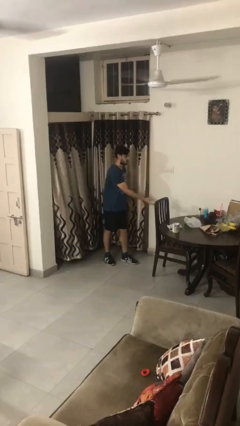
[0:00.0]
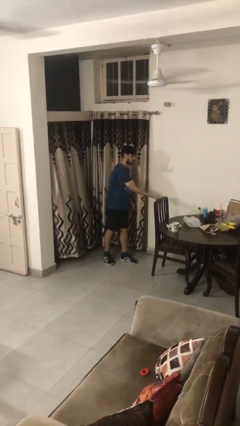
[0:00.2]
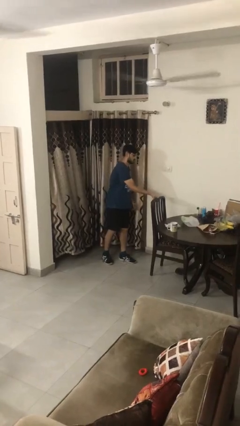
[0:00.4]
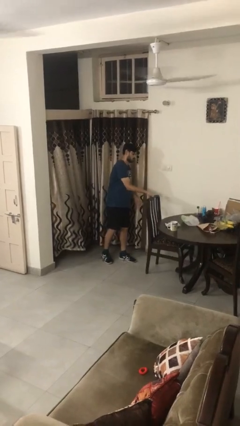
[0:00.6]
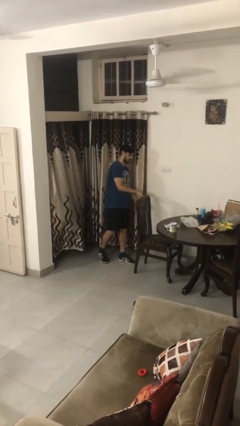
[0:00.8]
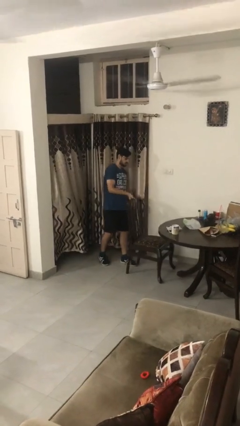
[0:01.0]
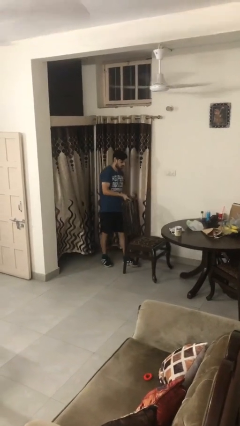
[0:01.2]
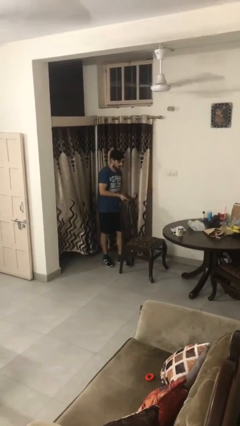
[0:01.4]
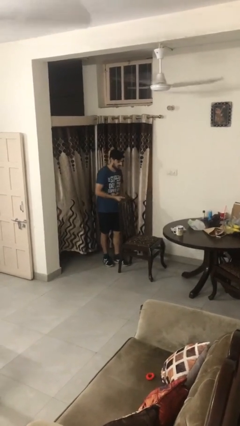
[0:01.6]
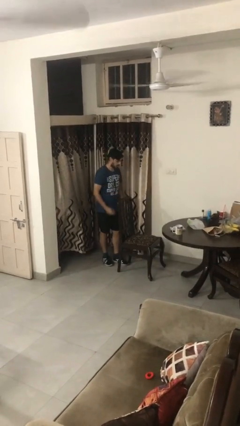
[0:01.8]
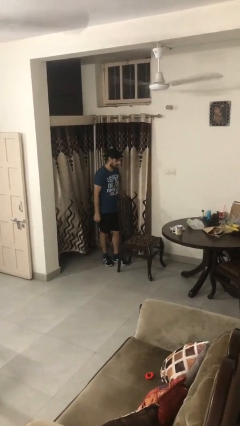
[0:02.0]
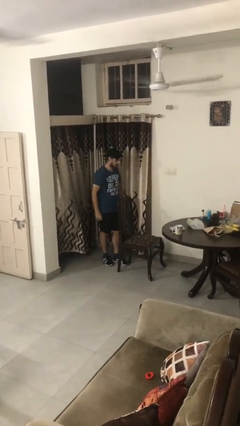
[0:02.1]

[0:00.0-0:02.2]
person pulls out chair

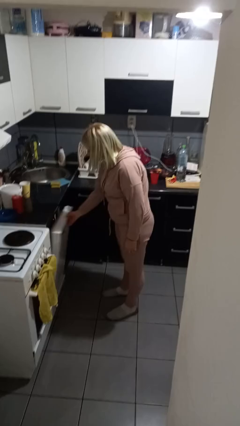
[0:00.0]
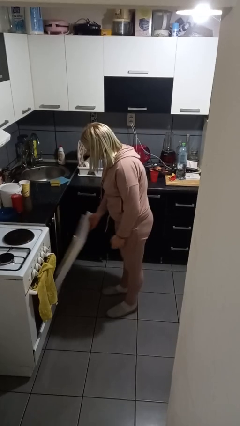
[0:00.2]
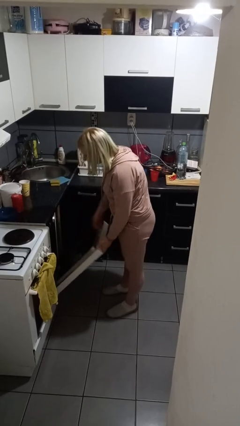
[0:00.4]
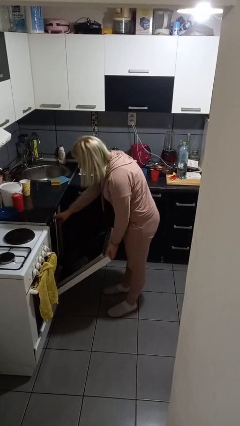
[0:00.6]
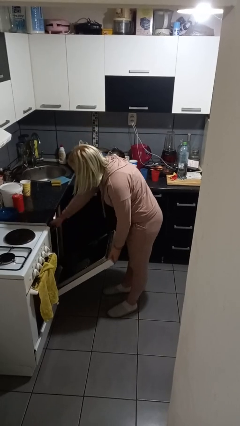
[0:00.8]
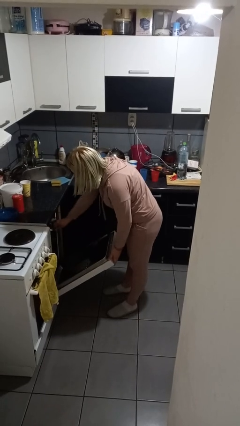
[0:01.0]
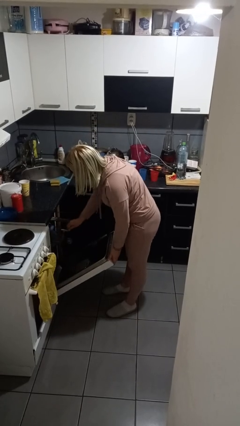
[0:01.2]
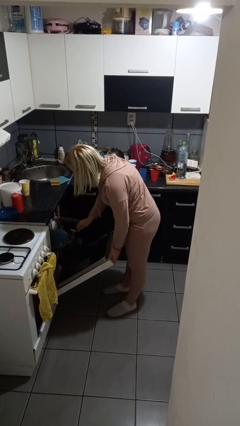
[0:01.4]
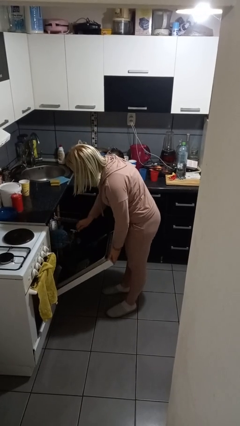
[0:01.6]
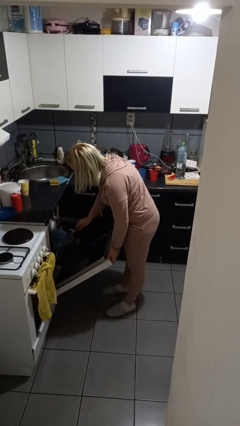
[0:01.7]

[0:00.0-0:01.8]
person opens dishwasher

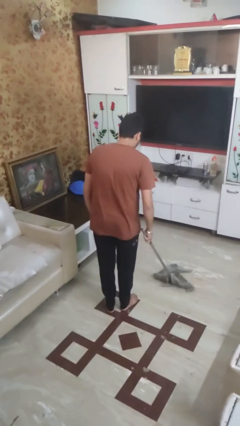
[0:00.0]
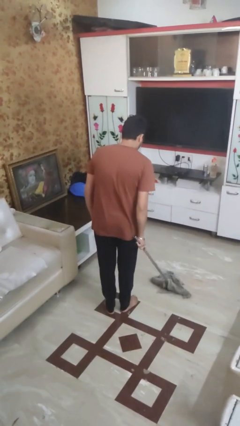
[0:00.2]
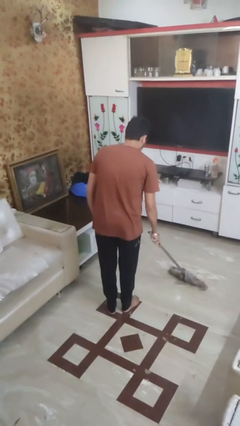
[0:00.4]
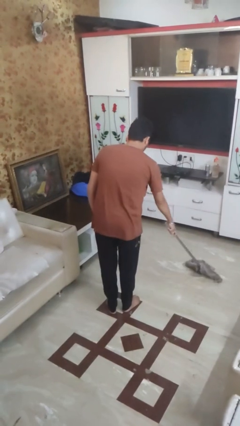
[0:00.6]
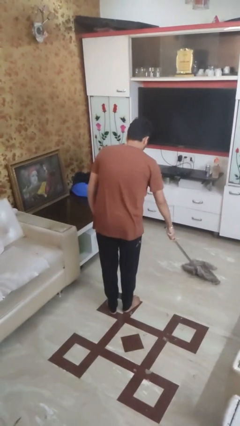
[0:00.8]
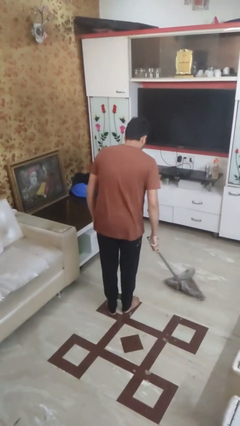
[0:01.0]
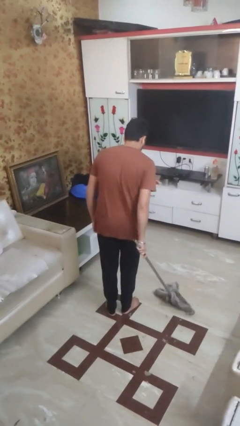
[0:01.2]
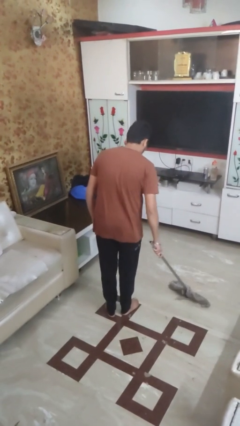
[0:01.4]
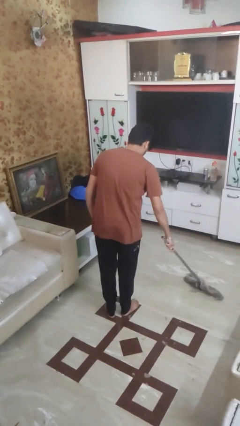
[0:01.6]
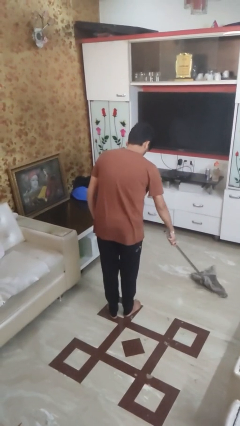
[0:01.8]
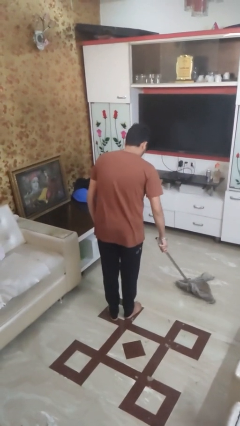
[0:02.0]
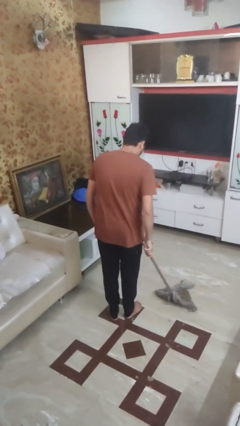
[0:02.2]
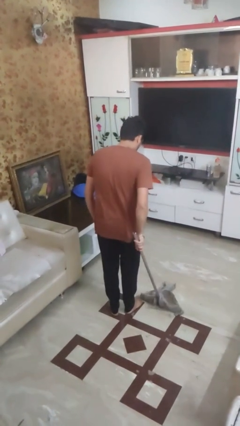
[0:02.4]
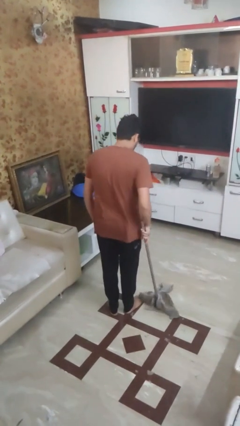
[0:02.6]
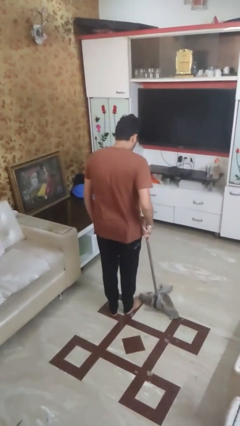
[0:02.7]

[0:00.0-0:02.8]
person mops

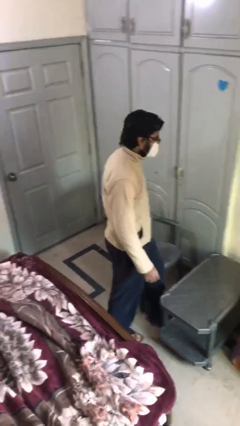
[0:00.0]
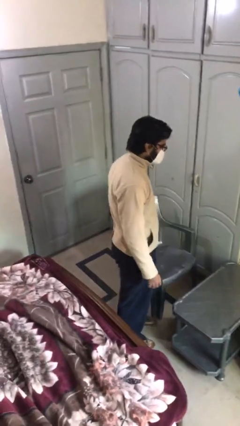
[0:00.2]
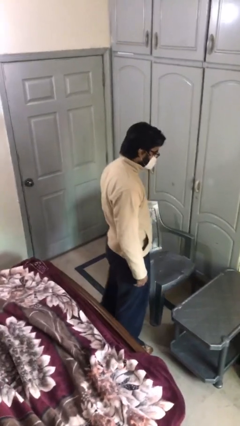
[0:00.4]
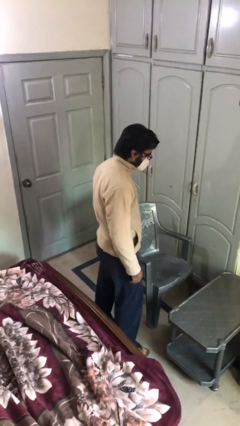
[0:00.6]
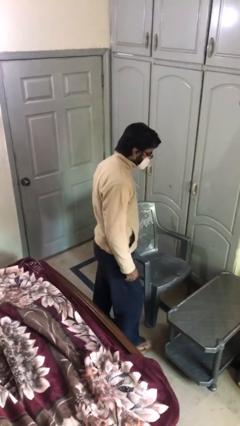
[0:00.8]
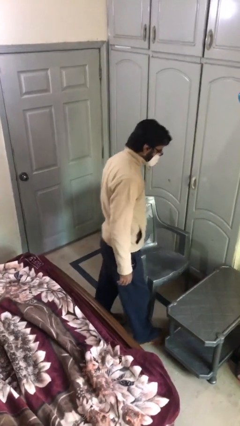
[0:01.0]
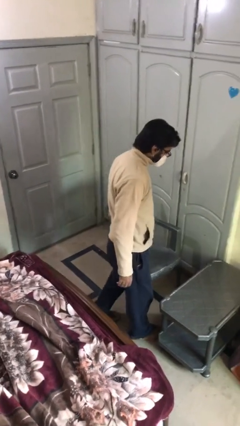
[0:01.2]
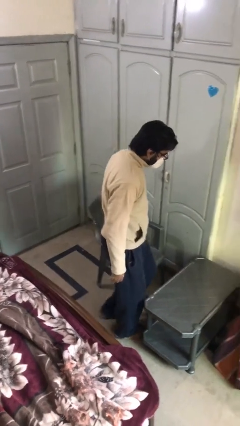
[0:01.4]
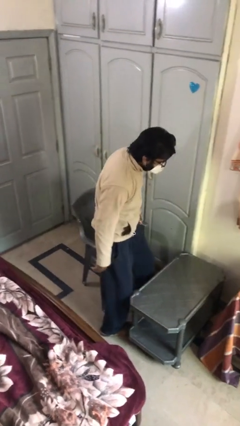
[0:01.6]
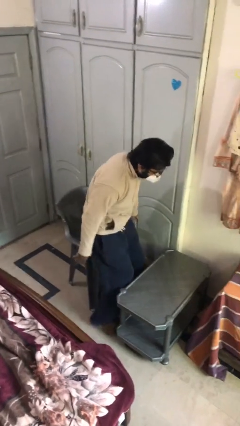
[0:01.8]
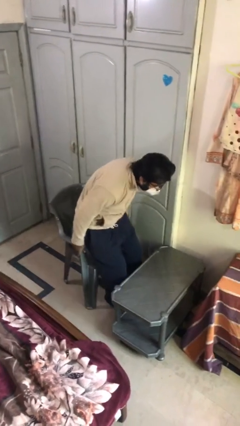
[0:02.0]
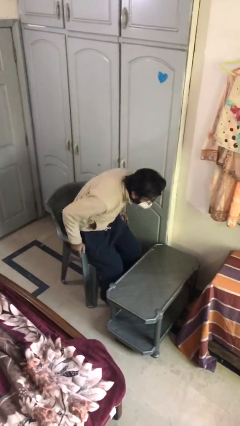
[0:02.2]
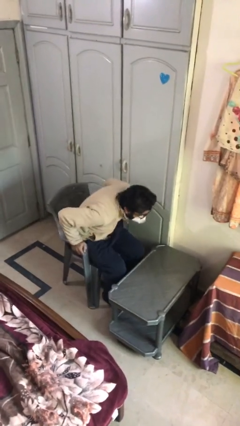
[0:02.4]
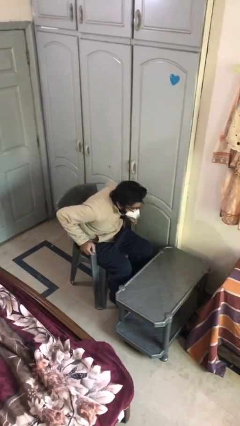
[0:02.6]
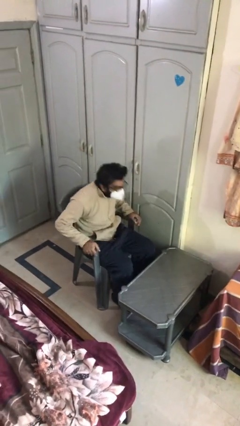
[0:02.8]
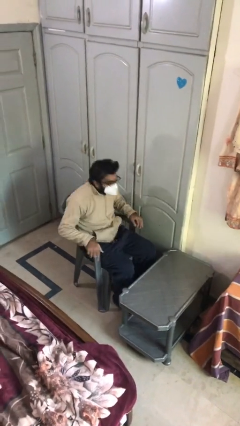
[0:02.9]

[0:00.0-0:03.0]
person sits down

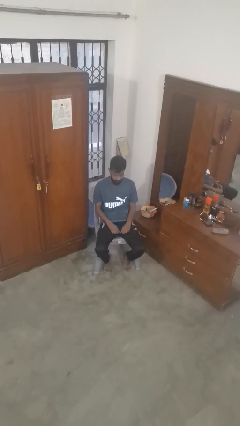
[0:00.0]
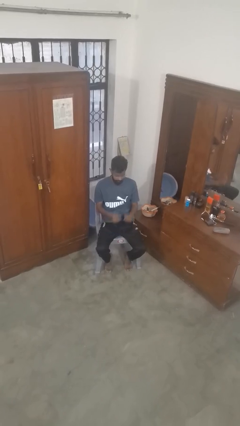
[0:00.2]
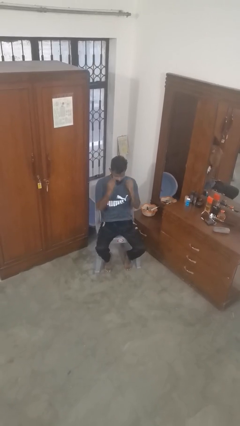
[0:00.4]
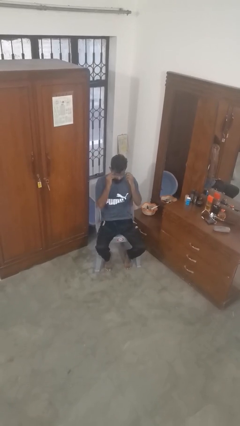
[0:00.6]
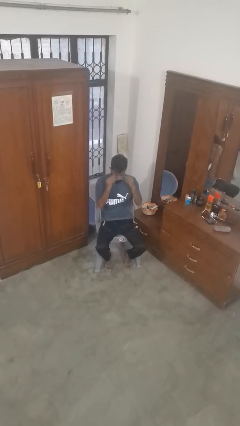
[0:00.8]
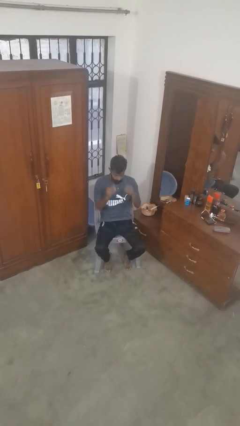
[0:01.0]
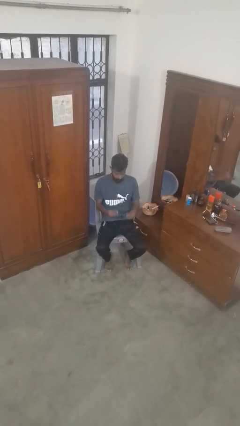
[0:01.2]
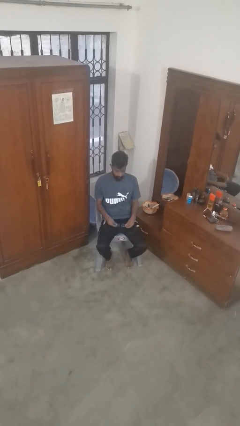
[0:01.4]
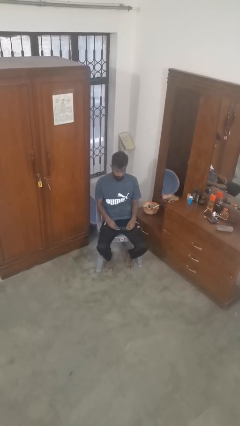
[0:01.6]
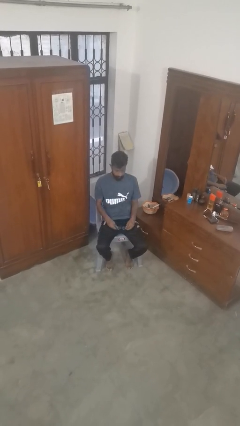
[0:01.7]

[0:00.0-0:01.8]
person takes off glasses

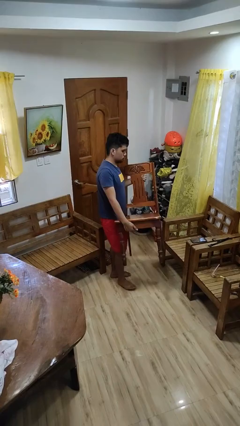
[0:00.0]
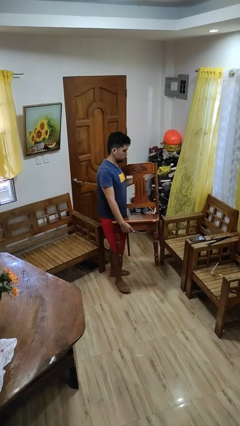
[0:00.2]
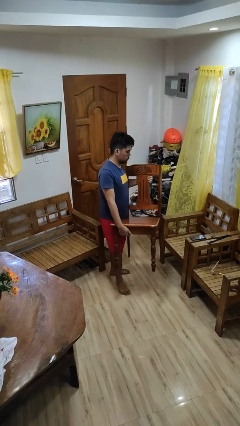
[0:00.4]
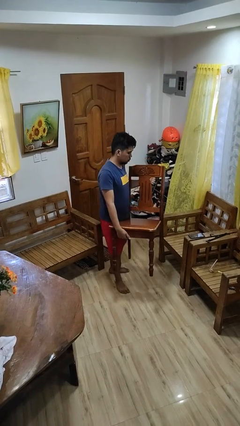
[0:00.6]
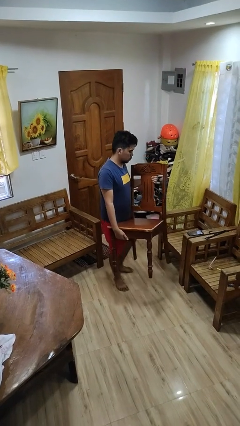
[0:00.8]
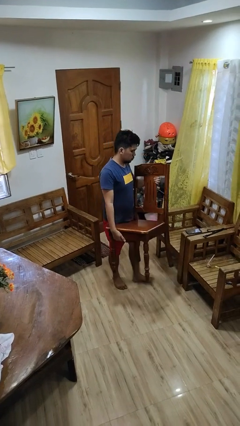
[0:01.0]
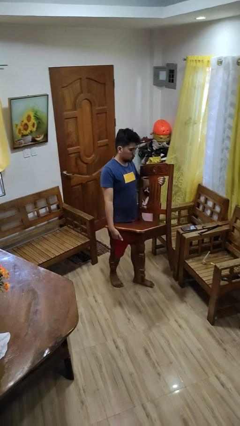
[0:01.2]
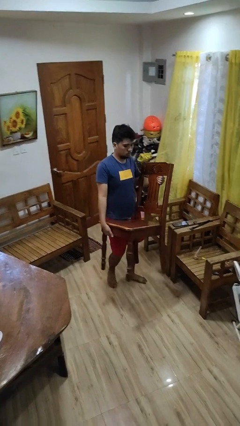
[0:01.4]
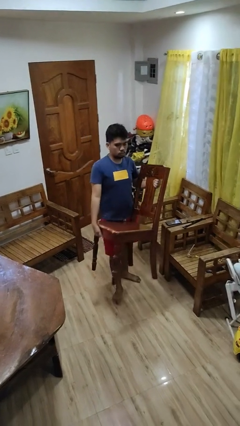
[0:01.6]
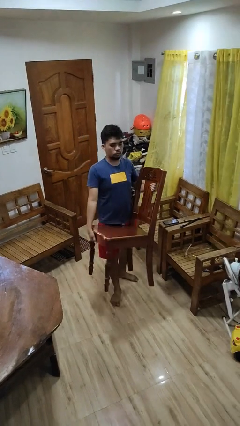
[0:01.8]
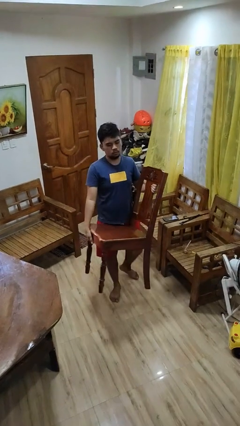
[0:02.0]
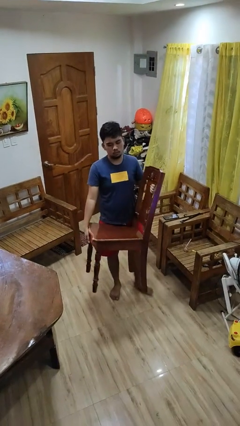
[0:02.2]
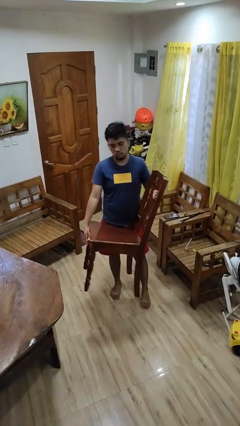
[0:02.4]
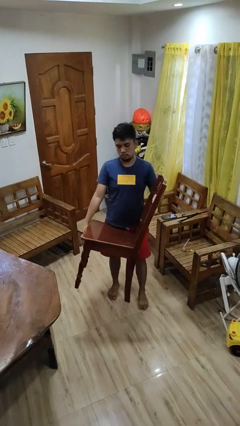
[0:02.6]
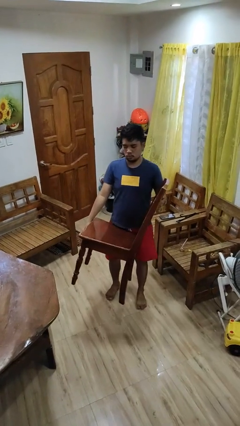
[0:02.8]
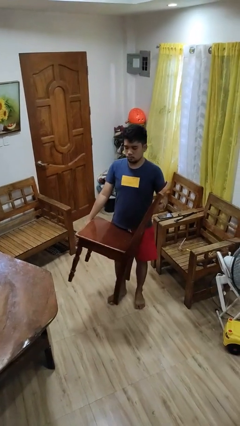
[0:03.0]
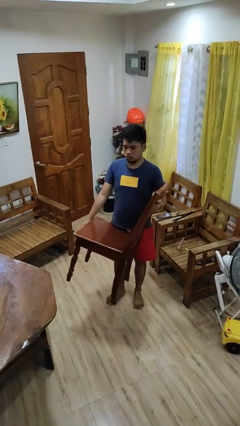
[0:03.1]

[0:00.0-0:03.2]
person carries furniture

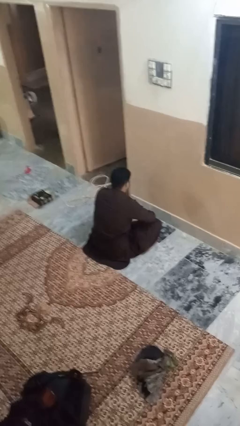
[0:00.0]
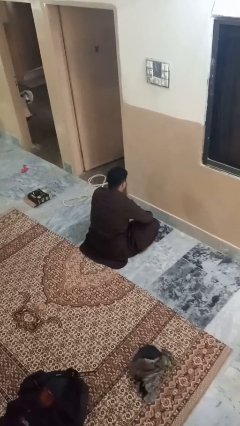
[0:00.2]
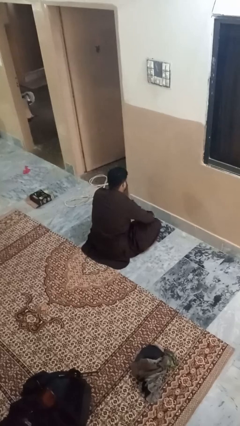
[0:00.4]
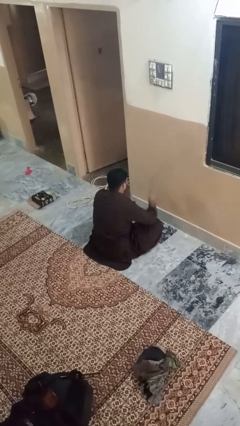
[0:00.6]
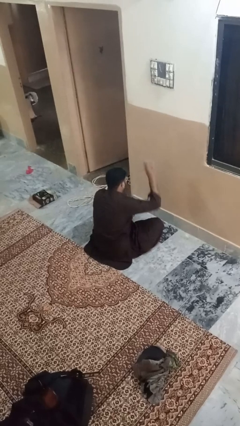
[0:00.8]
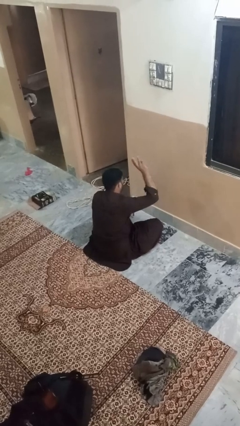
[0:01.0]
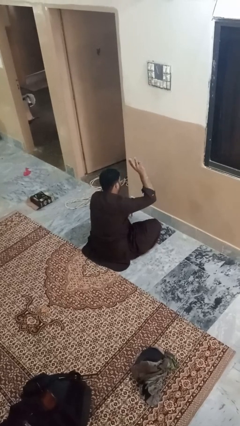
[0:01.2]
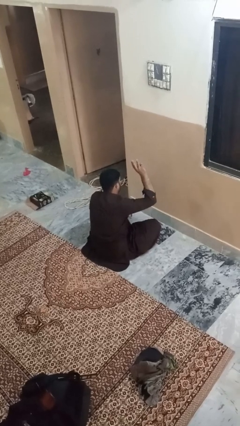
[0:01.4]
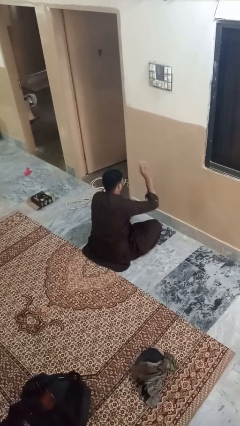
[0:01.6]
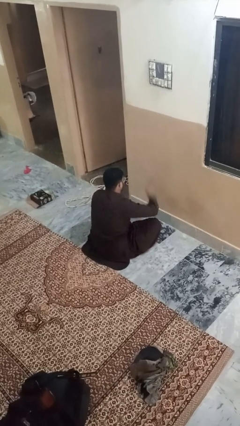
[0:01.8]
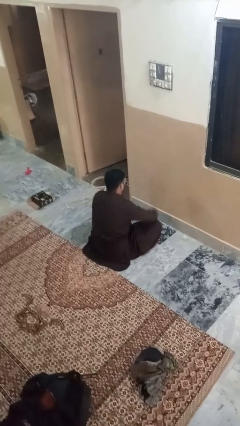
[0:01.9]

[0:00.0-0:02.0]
person gestures number three
